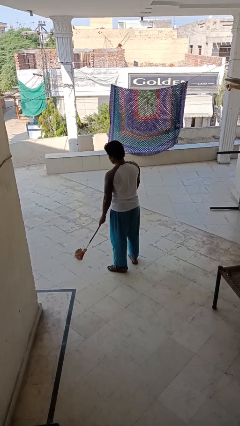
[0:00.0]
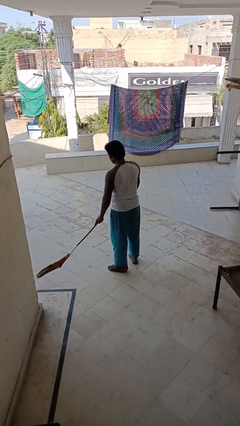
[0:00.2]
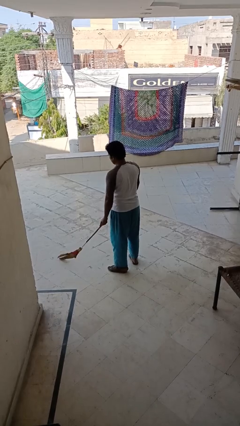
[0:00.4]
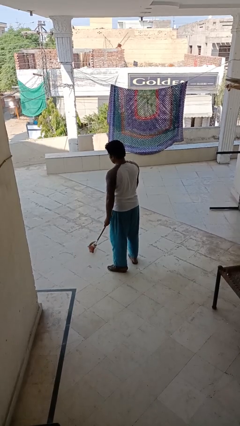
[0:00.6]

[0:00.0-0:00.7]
person sweeps floor

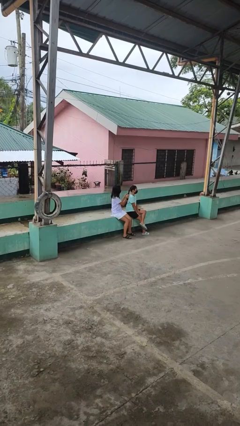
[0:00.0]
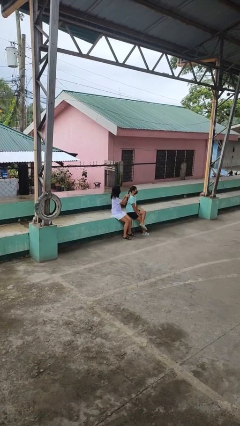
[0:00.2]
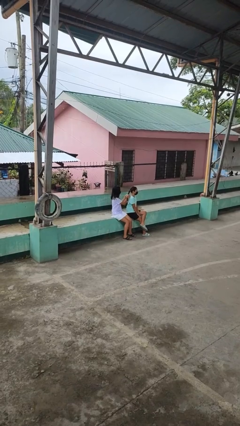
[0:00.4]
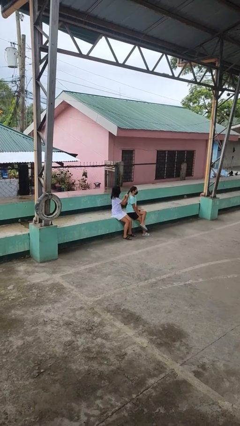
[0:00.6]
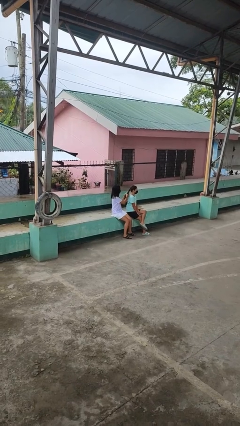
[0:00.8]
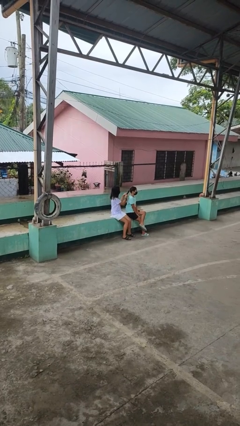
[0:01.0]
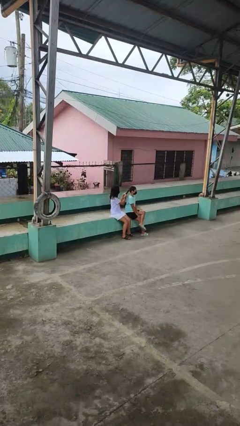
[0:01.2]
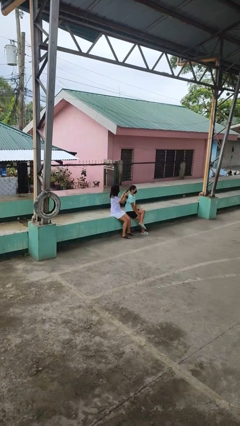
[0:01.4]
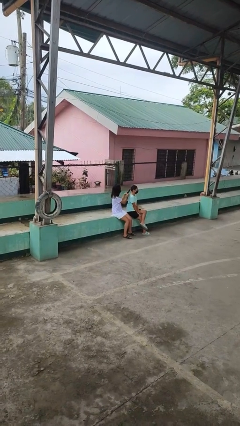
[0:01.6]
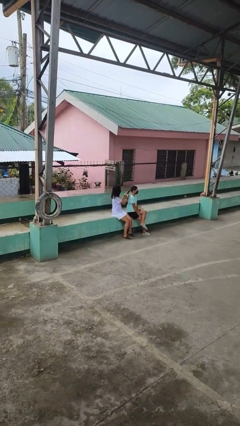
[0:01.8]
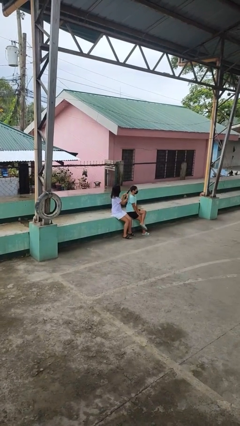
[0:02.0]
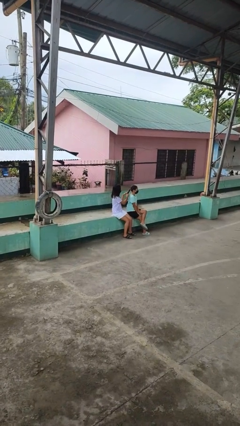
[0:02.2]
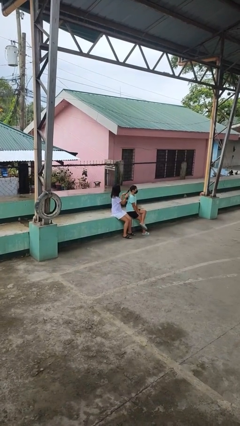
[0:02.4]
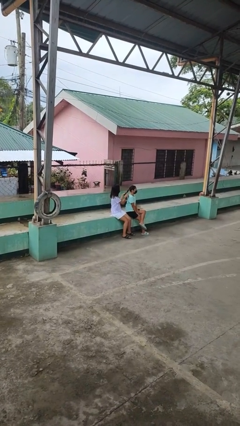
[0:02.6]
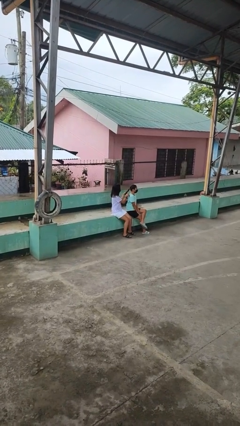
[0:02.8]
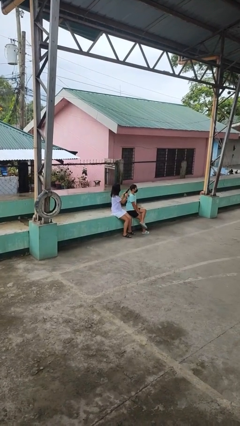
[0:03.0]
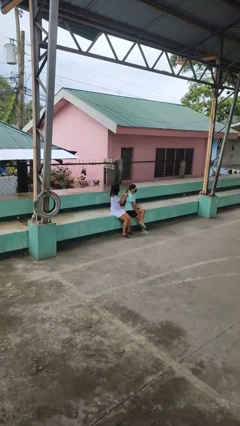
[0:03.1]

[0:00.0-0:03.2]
person braids hair of person

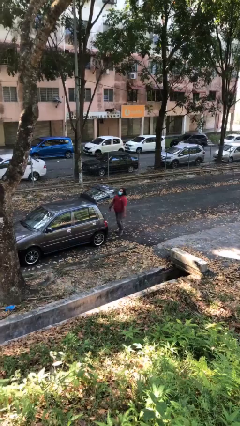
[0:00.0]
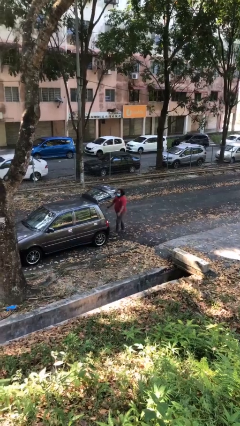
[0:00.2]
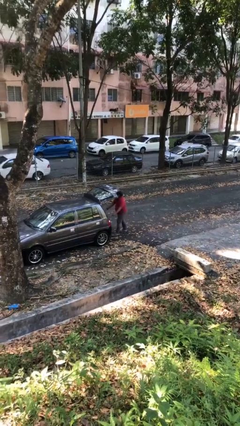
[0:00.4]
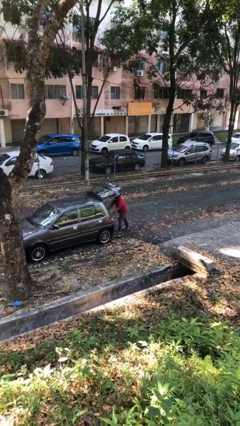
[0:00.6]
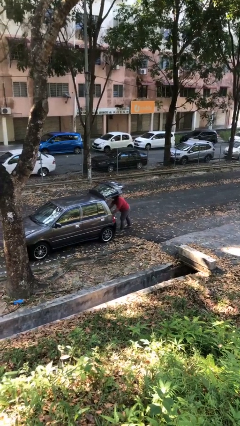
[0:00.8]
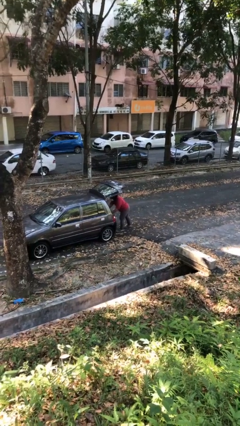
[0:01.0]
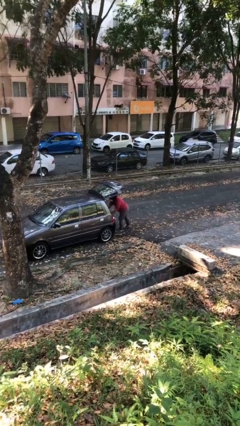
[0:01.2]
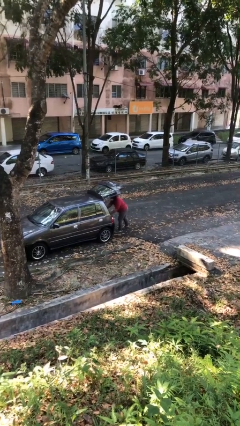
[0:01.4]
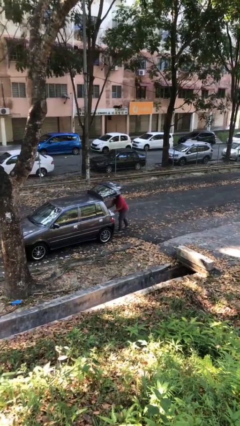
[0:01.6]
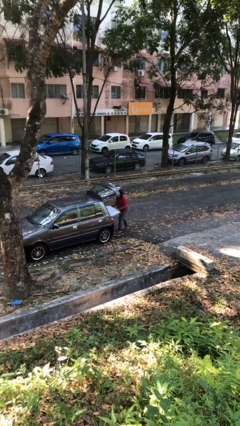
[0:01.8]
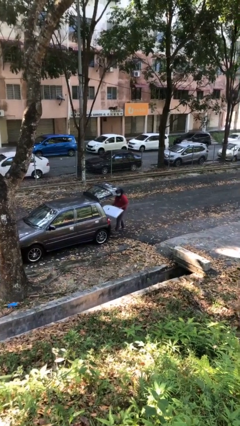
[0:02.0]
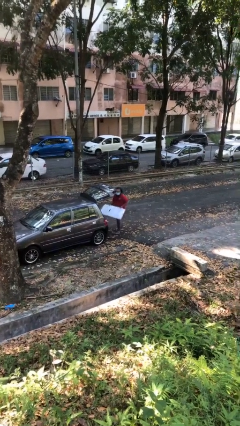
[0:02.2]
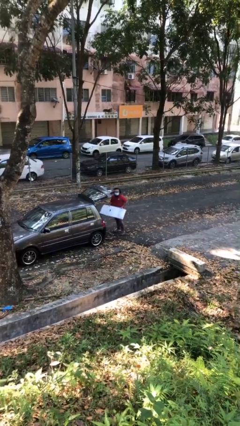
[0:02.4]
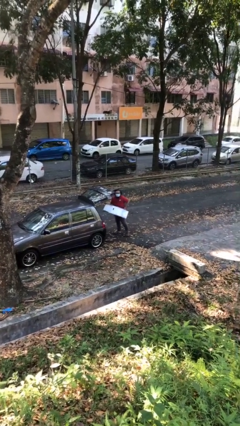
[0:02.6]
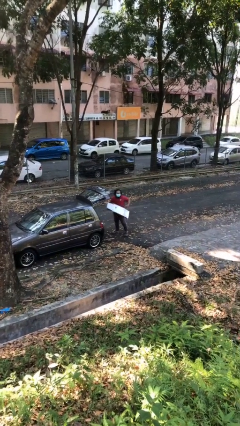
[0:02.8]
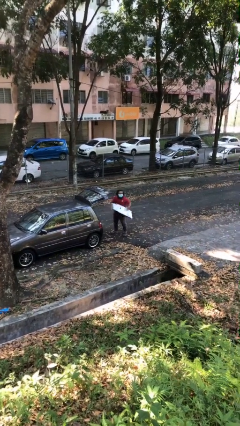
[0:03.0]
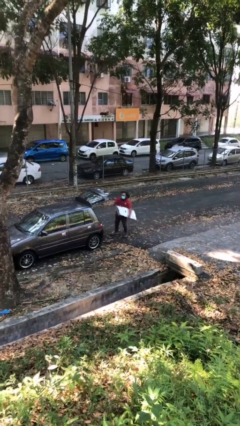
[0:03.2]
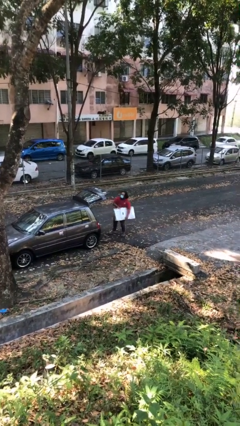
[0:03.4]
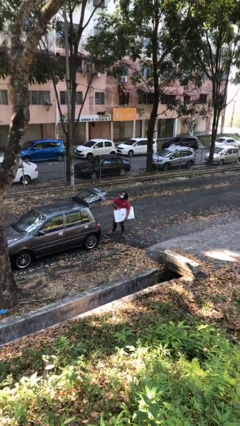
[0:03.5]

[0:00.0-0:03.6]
person unloads car

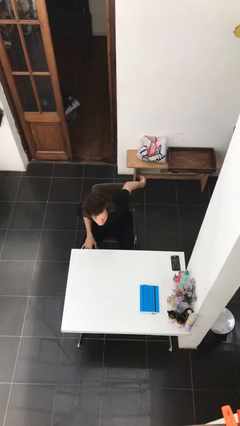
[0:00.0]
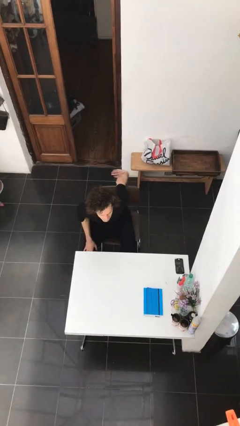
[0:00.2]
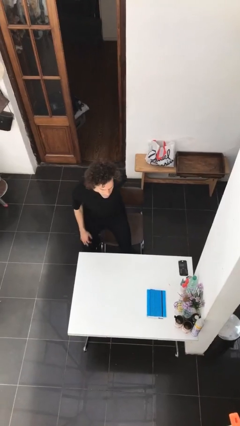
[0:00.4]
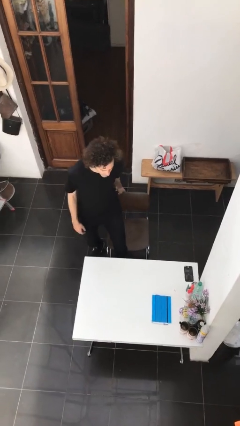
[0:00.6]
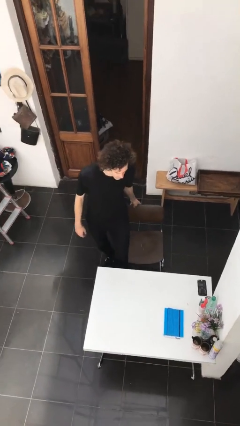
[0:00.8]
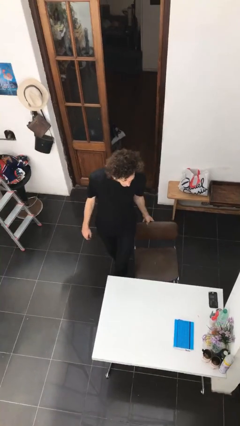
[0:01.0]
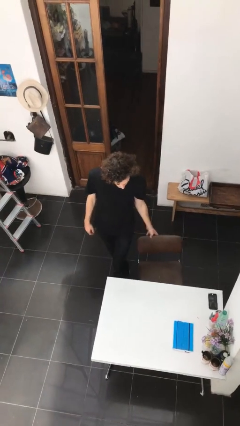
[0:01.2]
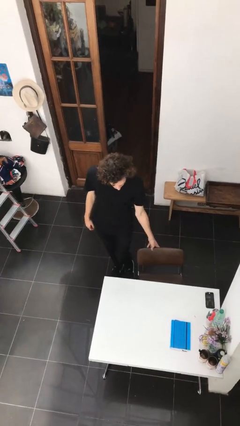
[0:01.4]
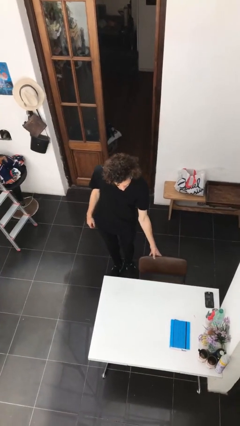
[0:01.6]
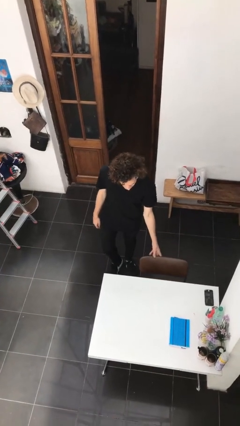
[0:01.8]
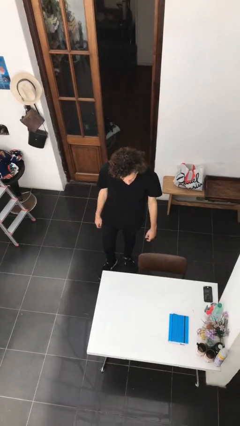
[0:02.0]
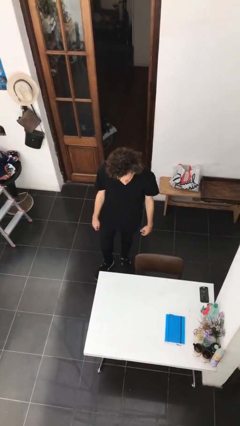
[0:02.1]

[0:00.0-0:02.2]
person stands up

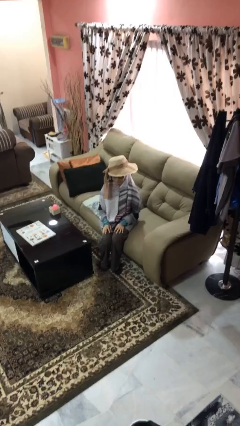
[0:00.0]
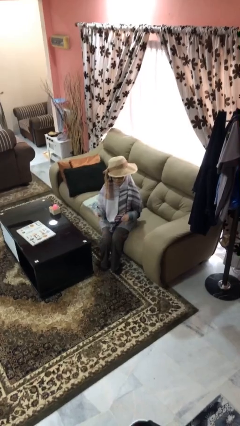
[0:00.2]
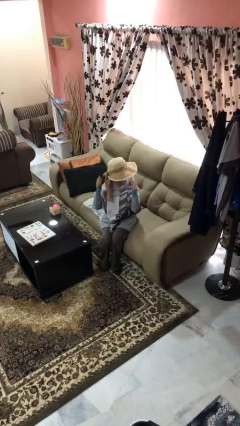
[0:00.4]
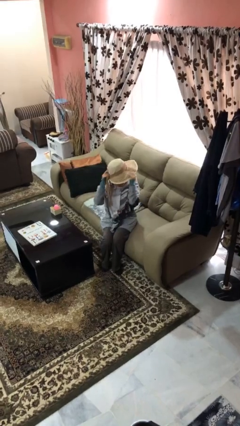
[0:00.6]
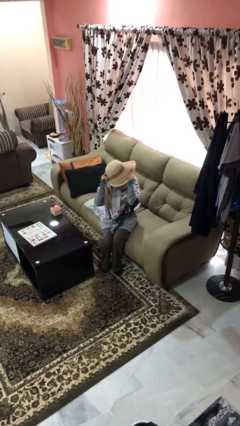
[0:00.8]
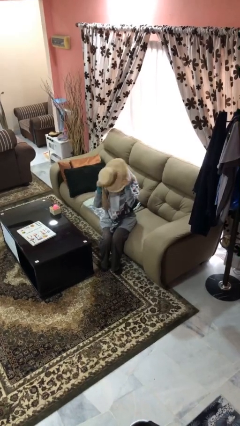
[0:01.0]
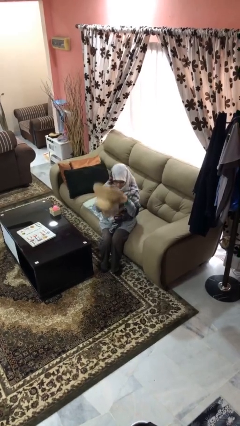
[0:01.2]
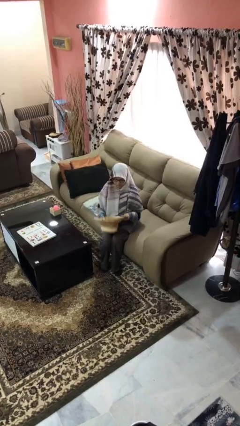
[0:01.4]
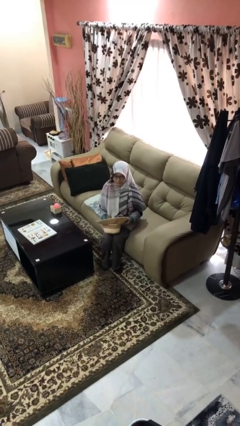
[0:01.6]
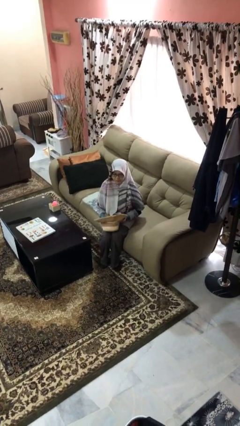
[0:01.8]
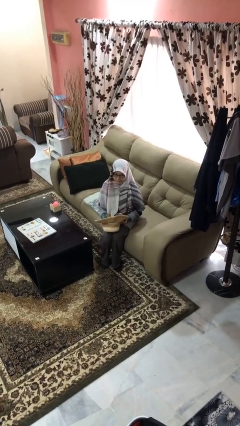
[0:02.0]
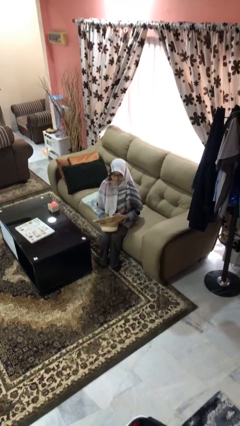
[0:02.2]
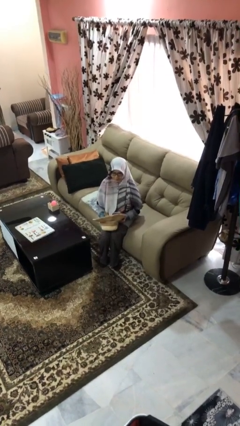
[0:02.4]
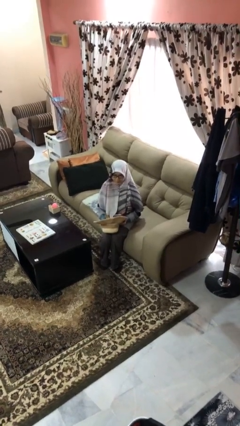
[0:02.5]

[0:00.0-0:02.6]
person takes off hat

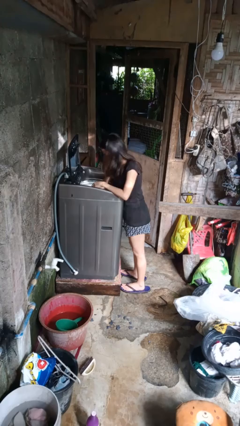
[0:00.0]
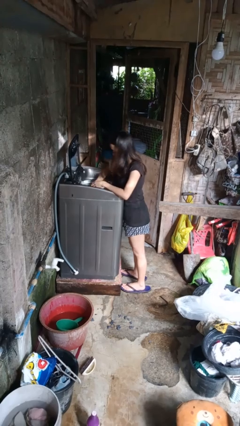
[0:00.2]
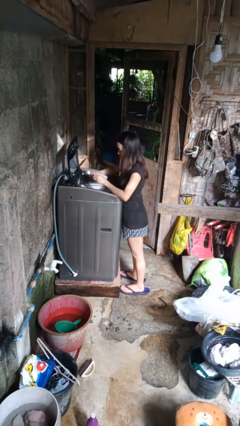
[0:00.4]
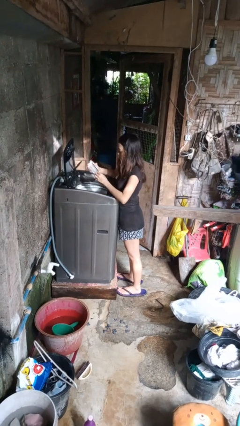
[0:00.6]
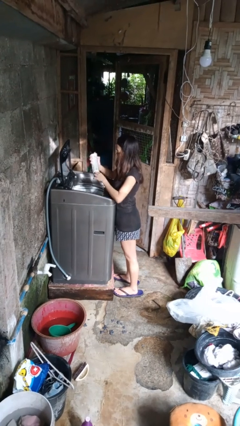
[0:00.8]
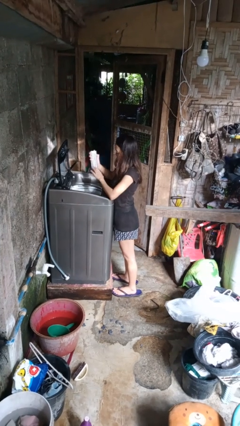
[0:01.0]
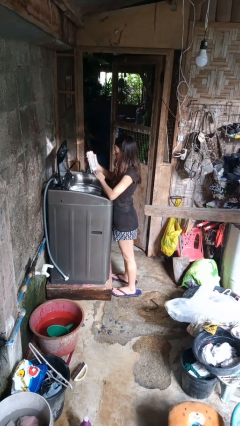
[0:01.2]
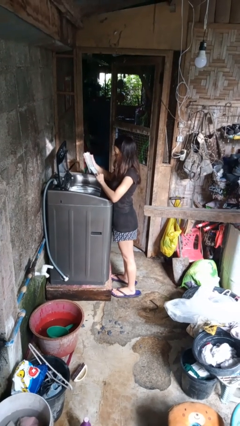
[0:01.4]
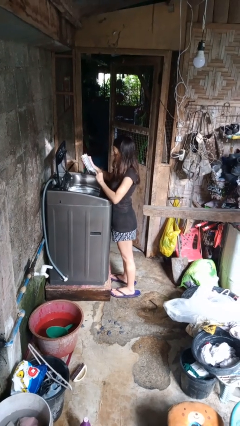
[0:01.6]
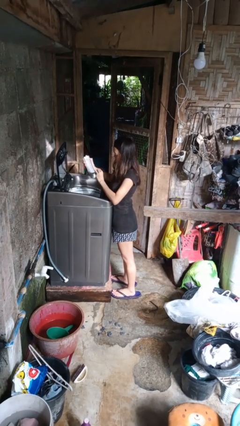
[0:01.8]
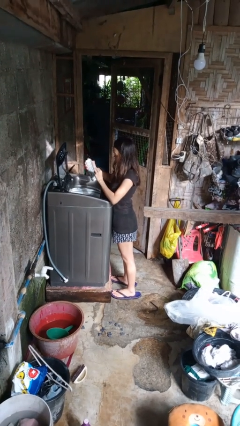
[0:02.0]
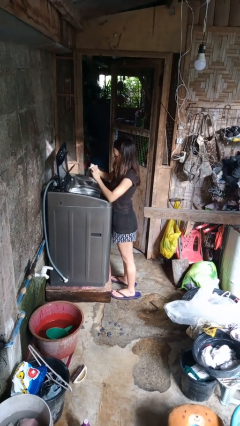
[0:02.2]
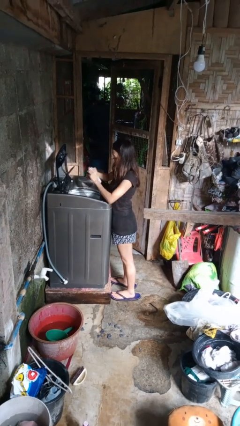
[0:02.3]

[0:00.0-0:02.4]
person cleans dryer lint trap

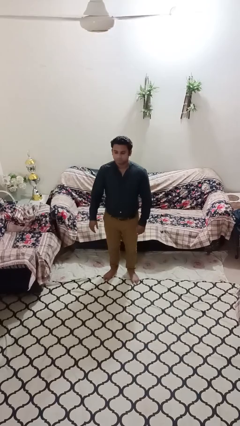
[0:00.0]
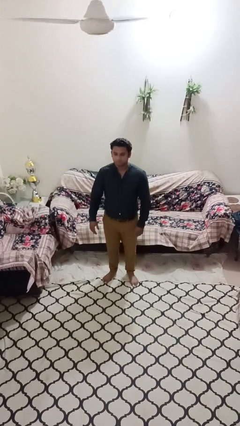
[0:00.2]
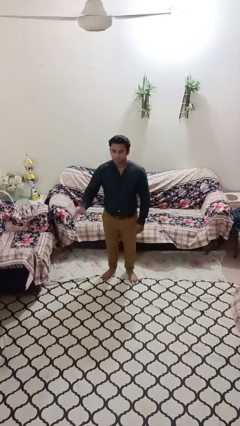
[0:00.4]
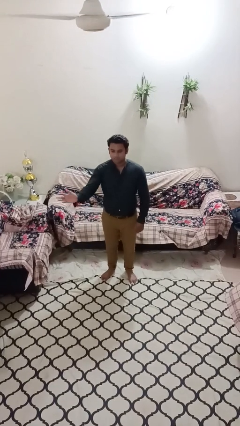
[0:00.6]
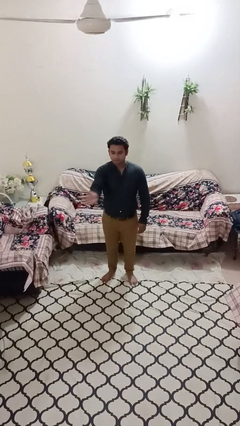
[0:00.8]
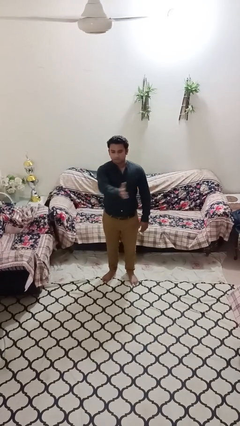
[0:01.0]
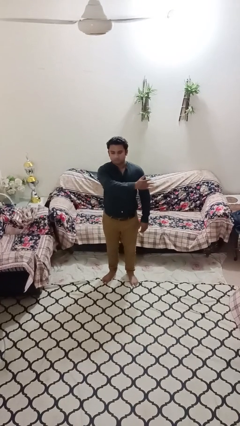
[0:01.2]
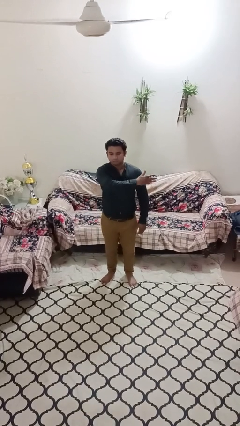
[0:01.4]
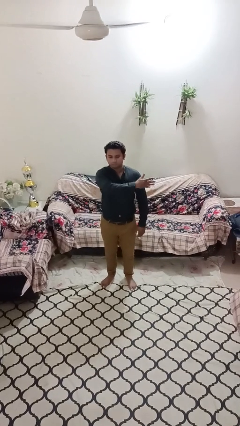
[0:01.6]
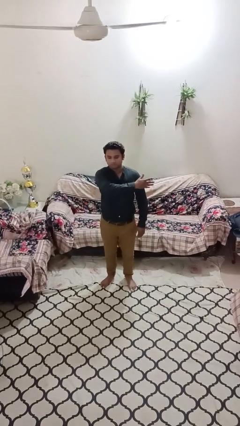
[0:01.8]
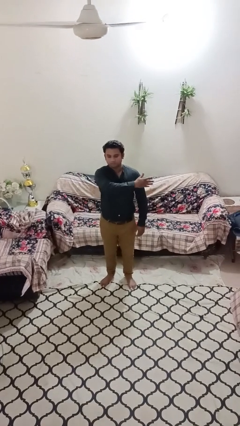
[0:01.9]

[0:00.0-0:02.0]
person gestures swipe left

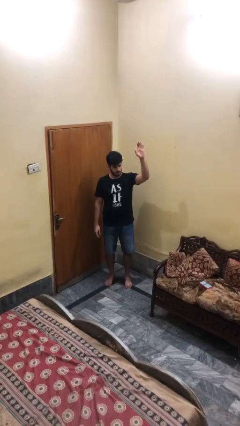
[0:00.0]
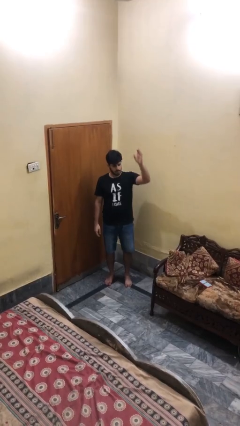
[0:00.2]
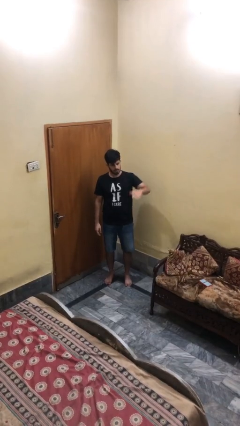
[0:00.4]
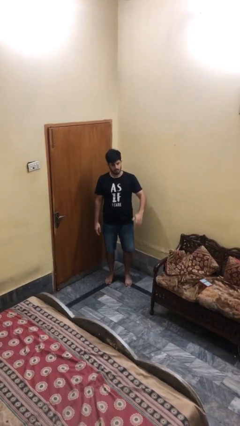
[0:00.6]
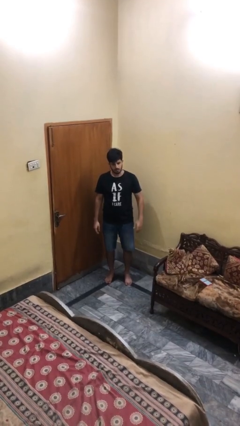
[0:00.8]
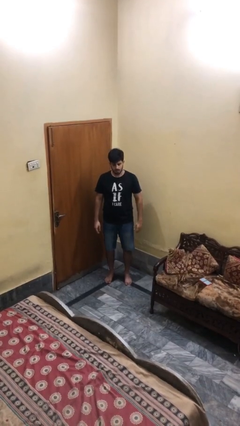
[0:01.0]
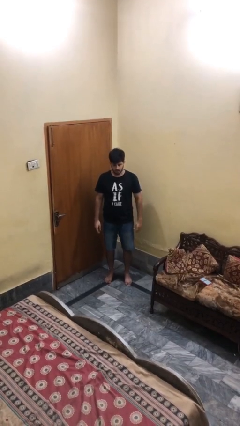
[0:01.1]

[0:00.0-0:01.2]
person gestures lower hand
